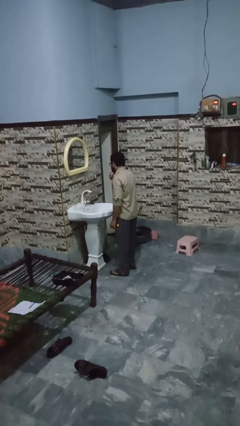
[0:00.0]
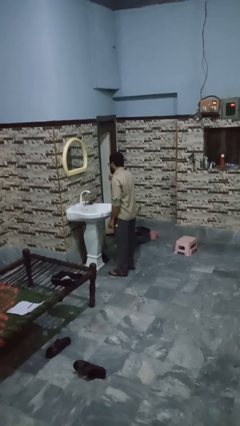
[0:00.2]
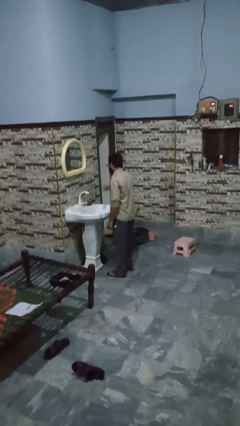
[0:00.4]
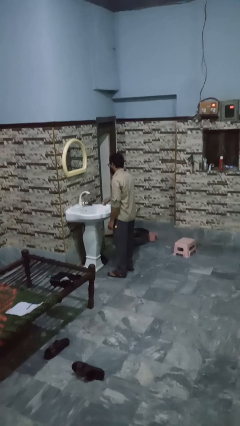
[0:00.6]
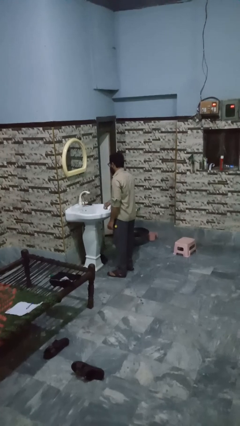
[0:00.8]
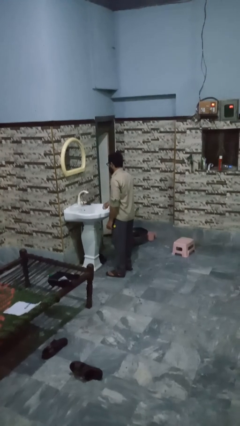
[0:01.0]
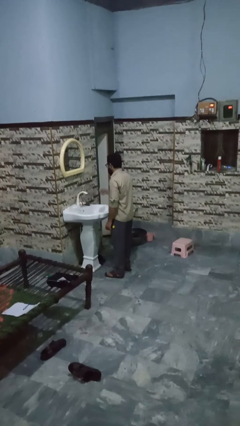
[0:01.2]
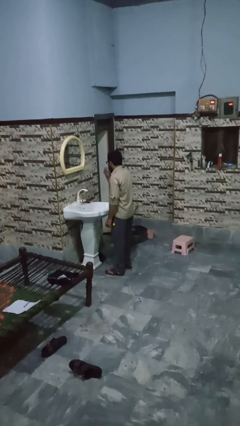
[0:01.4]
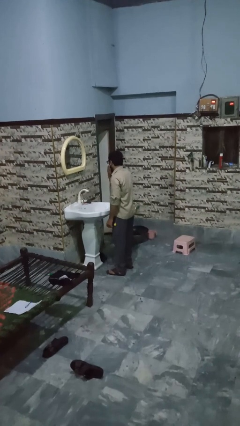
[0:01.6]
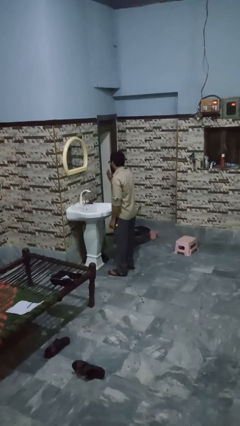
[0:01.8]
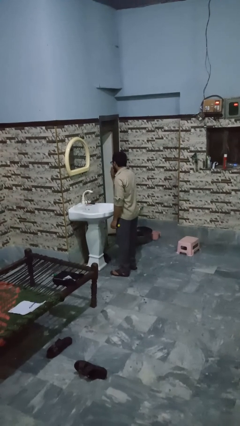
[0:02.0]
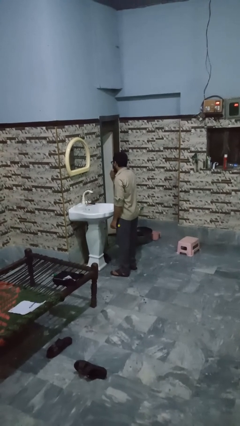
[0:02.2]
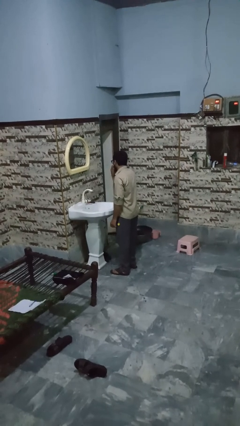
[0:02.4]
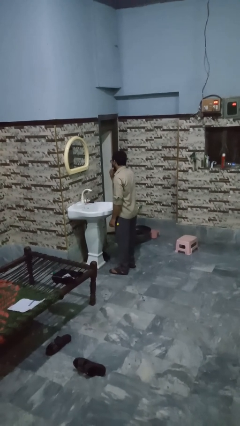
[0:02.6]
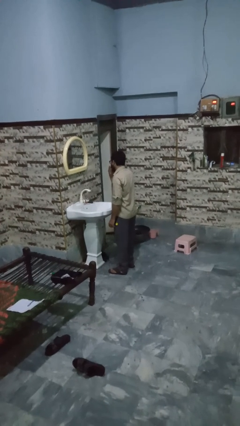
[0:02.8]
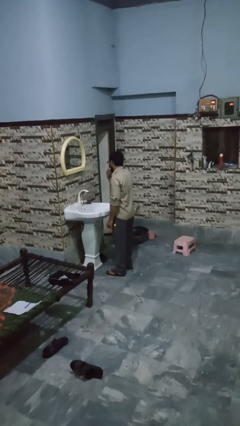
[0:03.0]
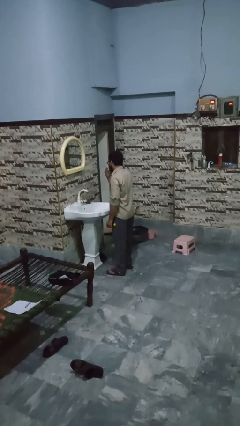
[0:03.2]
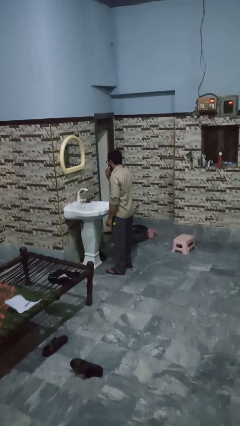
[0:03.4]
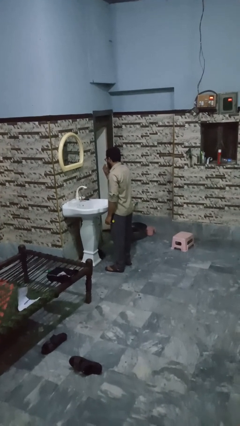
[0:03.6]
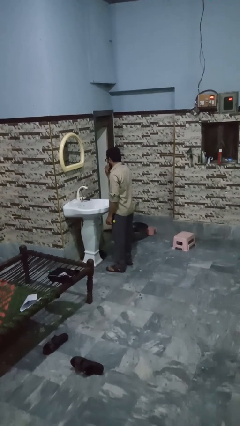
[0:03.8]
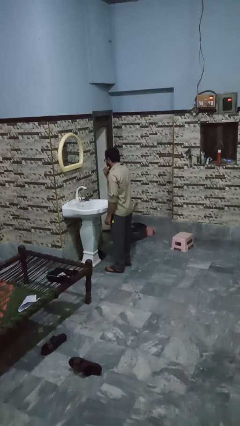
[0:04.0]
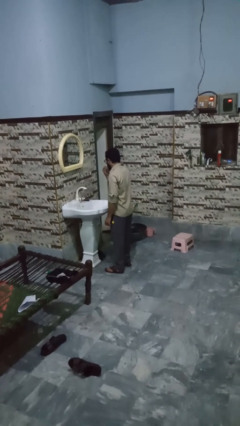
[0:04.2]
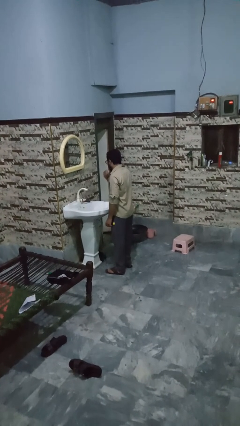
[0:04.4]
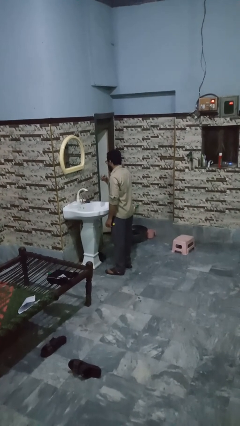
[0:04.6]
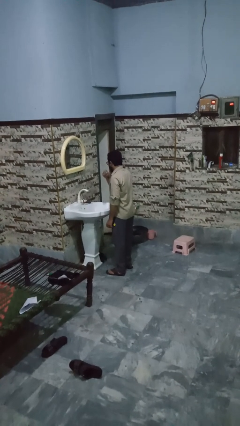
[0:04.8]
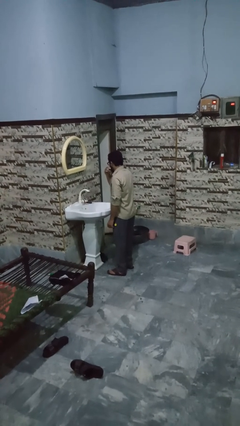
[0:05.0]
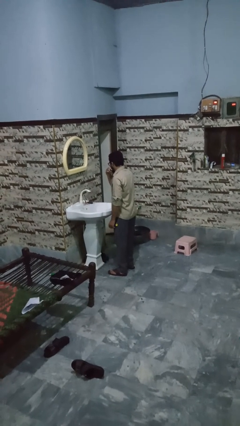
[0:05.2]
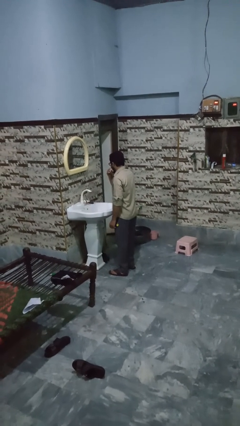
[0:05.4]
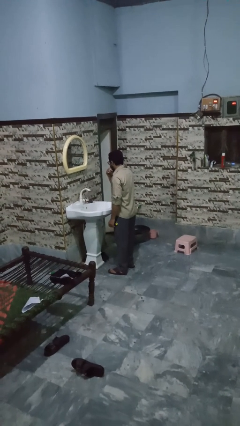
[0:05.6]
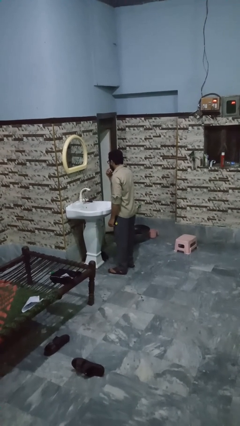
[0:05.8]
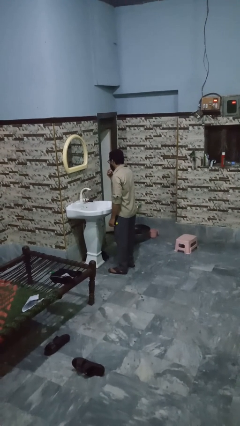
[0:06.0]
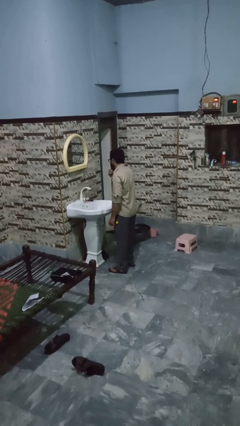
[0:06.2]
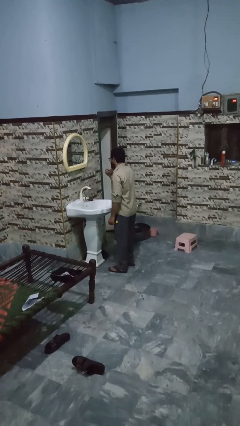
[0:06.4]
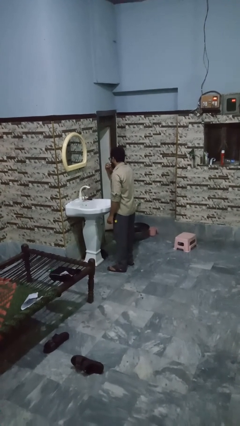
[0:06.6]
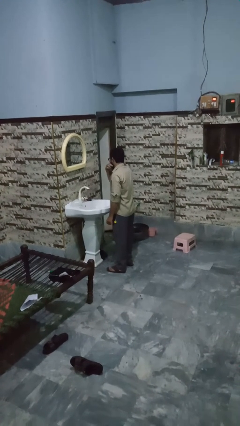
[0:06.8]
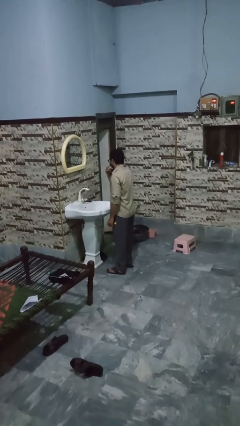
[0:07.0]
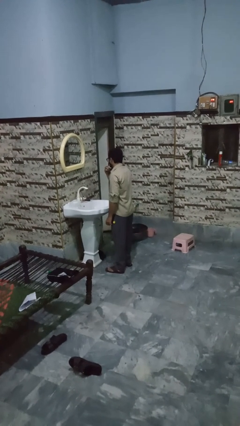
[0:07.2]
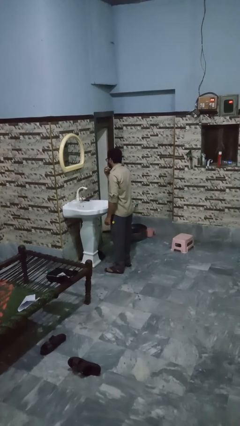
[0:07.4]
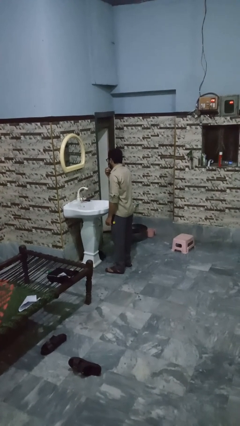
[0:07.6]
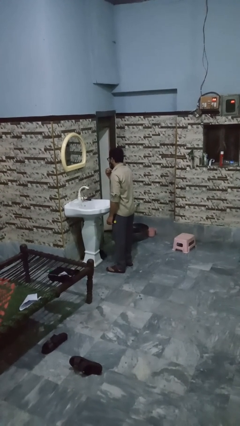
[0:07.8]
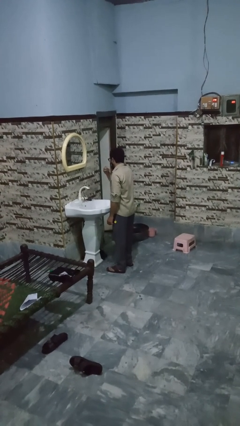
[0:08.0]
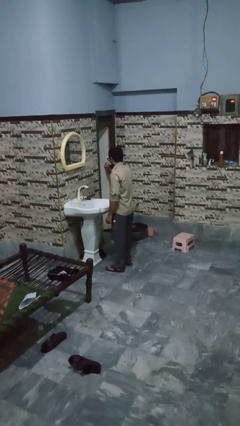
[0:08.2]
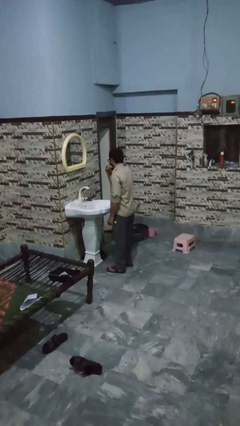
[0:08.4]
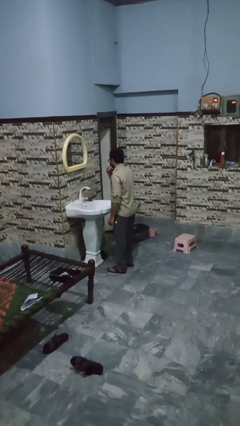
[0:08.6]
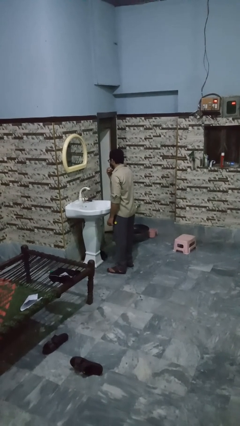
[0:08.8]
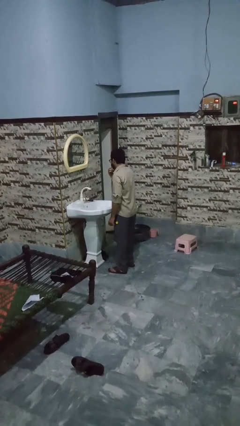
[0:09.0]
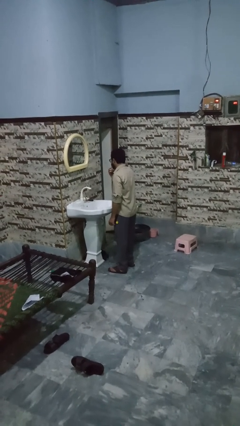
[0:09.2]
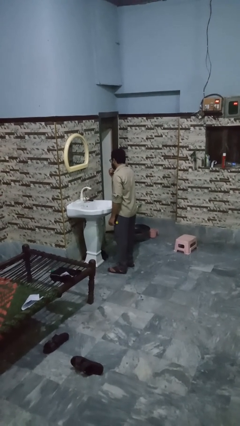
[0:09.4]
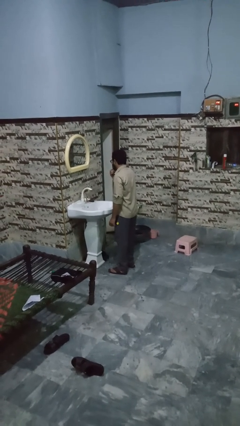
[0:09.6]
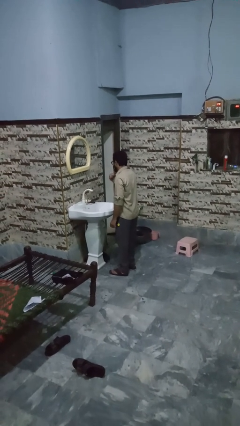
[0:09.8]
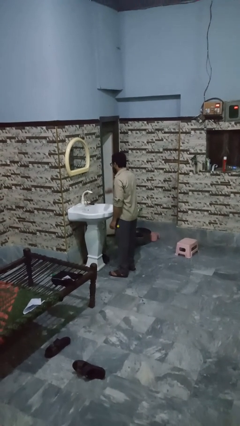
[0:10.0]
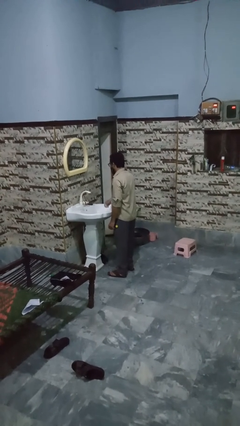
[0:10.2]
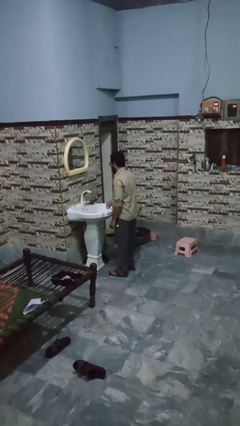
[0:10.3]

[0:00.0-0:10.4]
person applies shaving cream

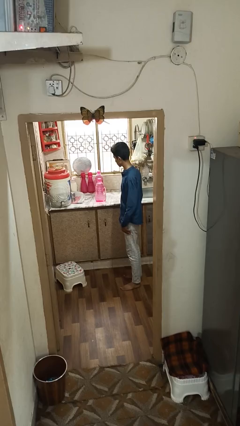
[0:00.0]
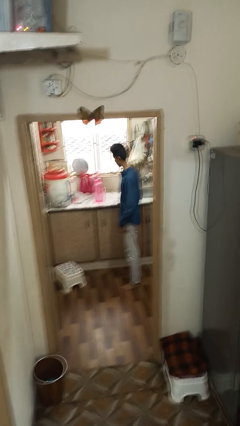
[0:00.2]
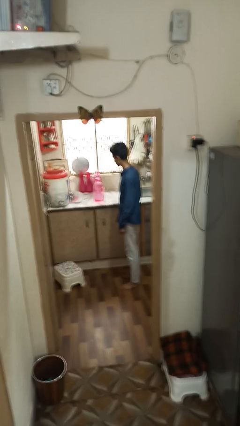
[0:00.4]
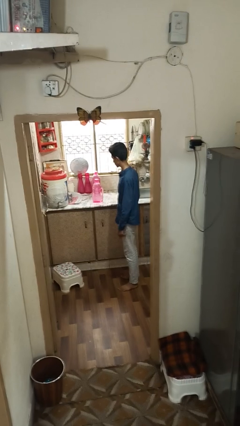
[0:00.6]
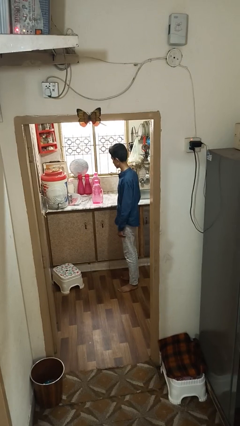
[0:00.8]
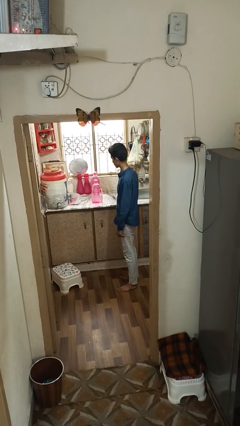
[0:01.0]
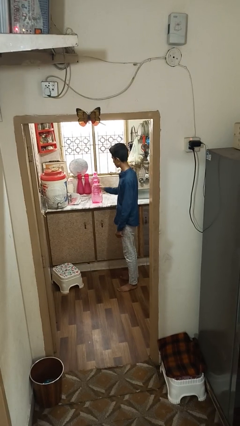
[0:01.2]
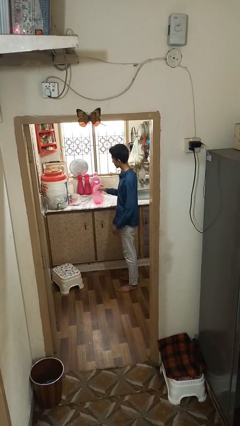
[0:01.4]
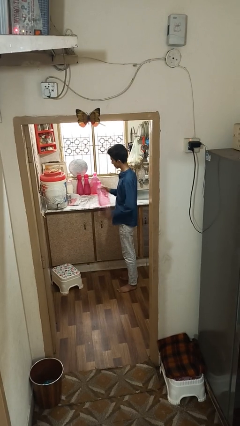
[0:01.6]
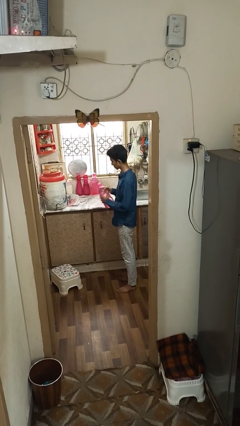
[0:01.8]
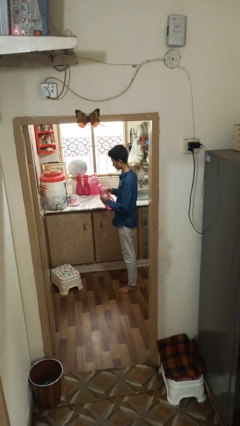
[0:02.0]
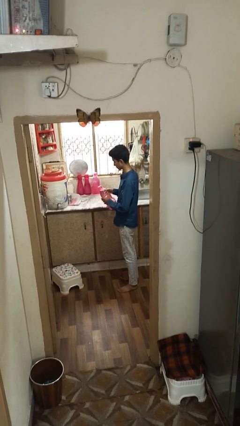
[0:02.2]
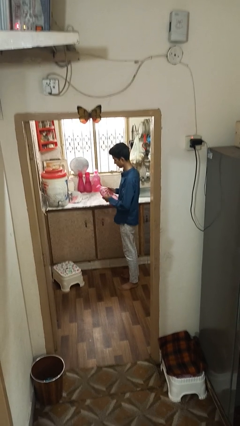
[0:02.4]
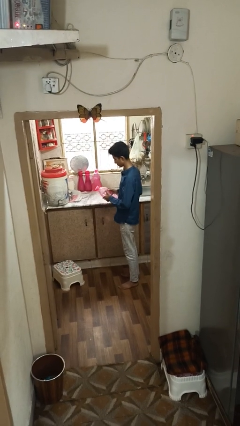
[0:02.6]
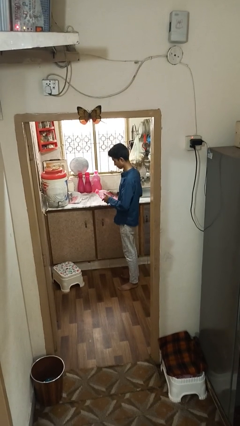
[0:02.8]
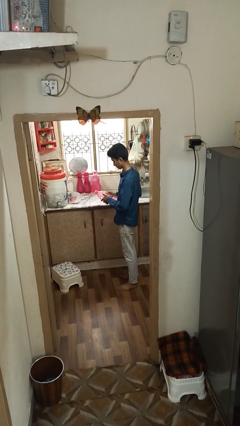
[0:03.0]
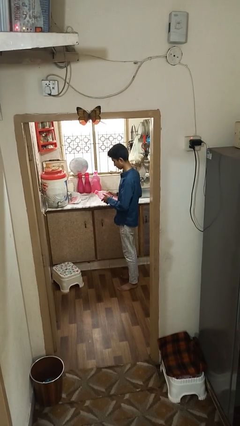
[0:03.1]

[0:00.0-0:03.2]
person picks up object from countertop

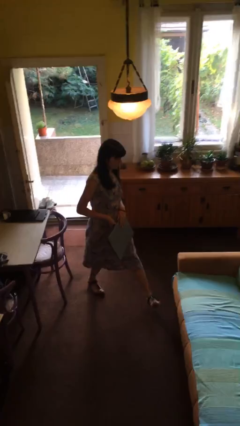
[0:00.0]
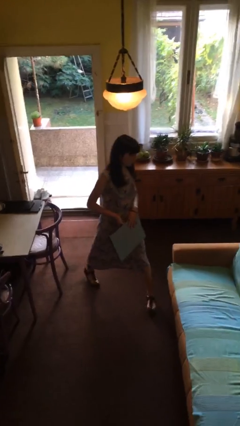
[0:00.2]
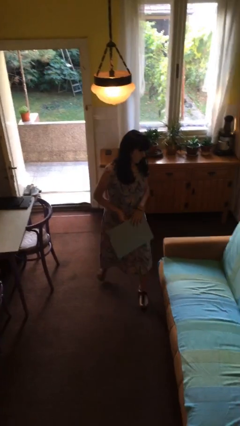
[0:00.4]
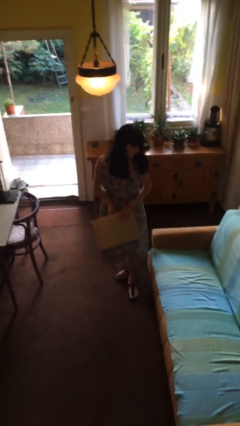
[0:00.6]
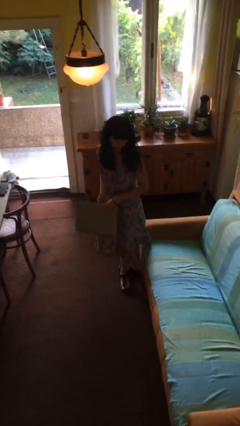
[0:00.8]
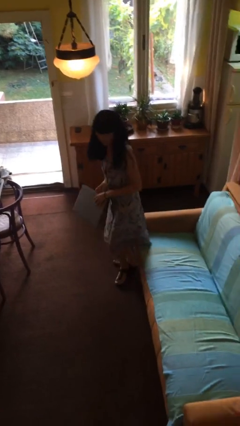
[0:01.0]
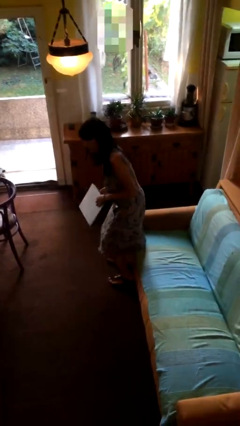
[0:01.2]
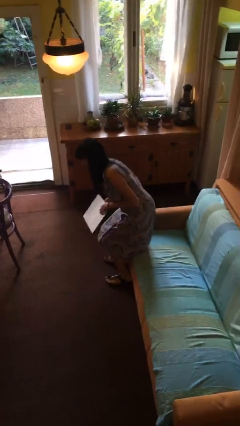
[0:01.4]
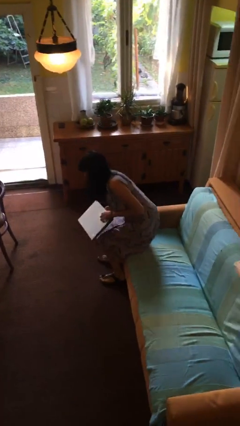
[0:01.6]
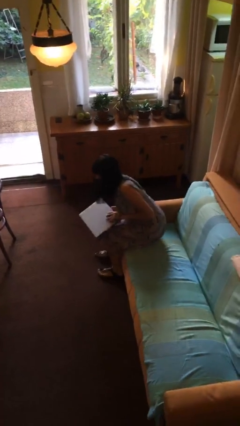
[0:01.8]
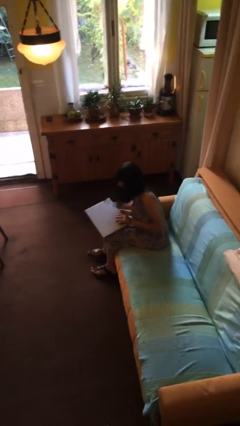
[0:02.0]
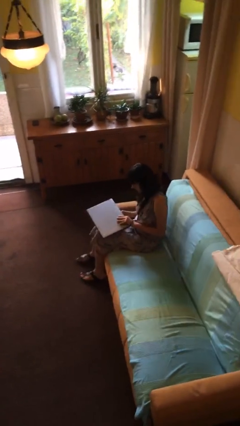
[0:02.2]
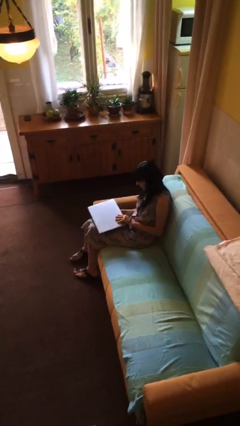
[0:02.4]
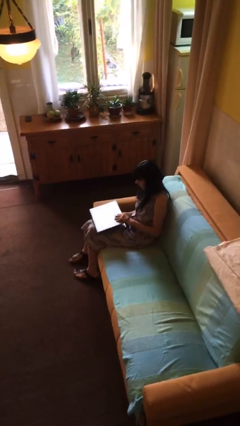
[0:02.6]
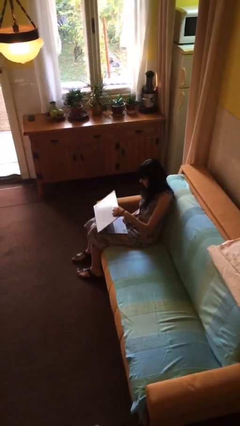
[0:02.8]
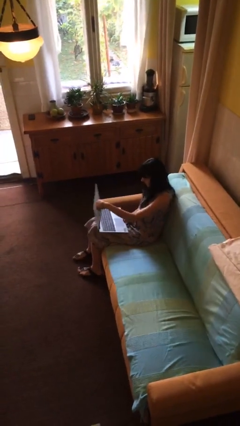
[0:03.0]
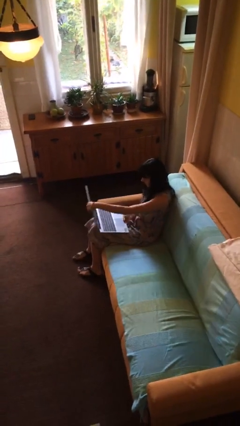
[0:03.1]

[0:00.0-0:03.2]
person sits down

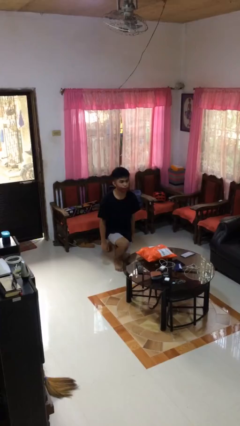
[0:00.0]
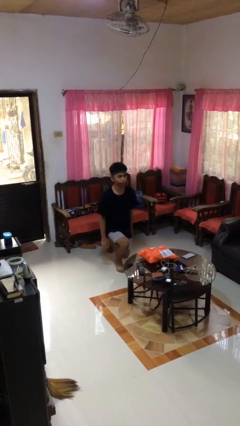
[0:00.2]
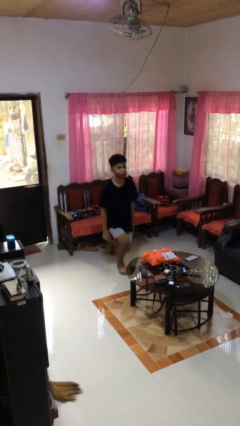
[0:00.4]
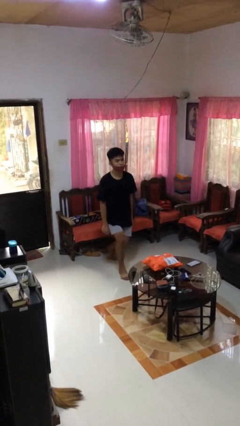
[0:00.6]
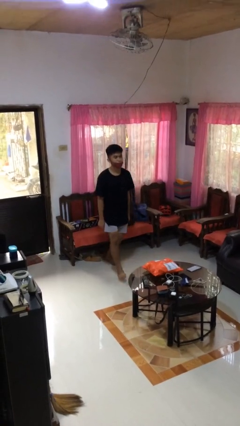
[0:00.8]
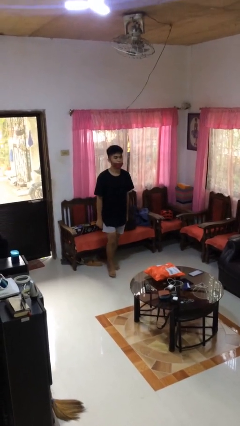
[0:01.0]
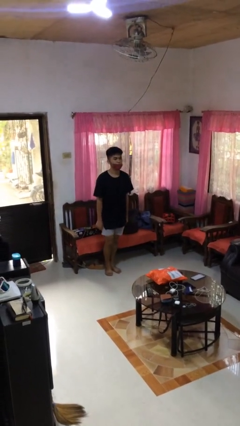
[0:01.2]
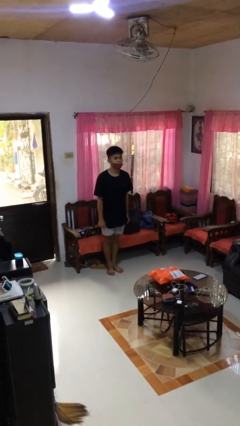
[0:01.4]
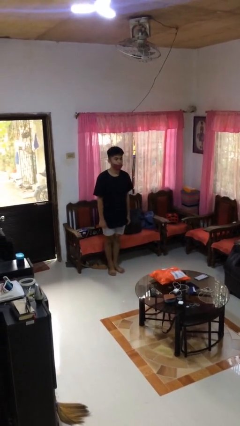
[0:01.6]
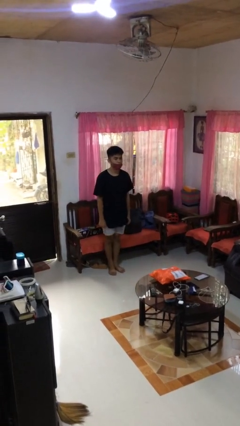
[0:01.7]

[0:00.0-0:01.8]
person stands up from floor
